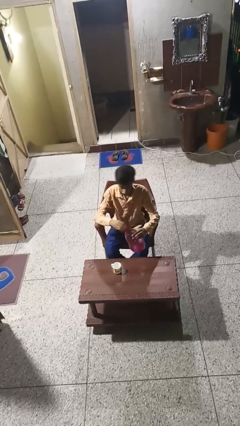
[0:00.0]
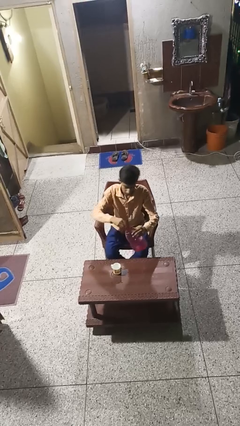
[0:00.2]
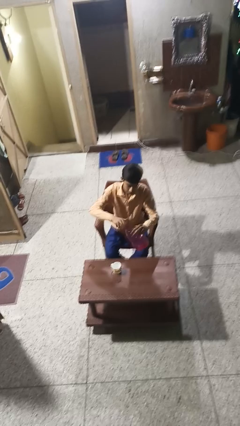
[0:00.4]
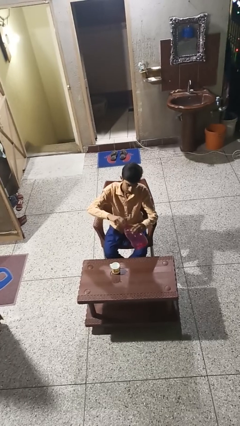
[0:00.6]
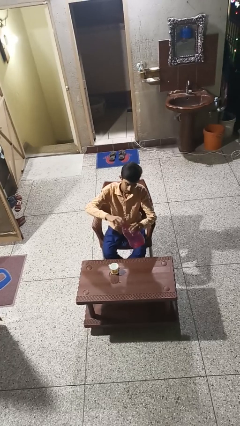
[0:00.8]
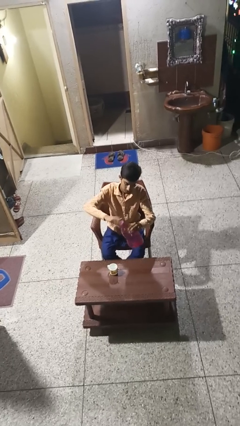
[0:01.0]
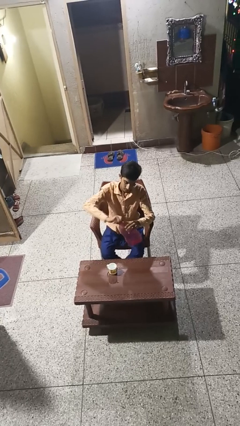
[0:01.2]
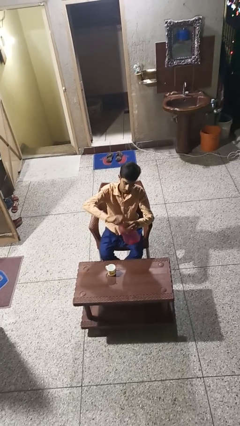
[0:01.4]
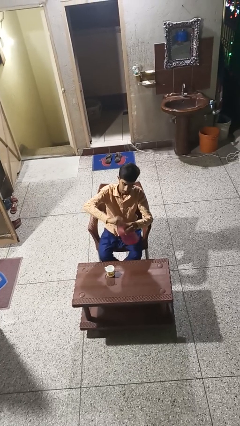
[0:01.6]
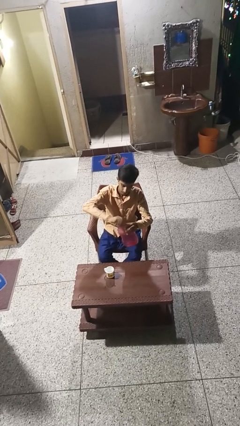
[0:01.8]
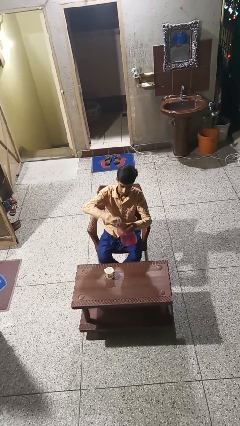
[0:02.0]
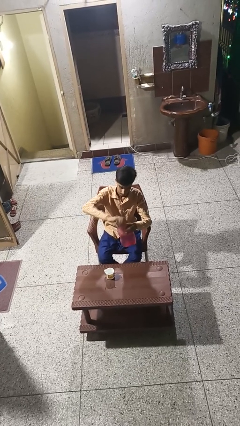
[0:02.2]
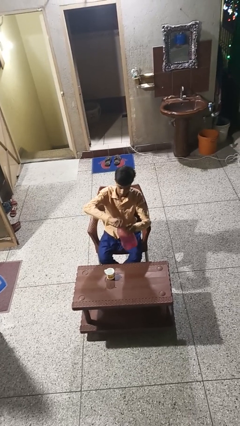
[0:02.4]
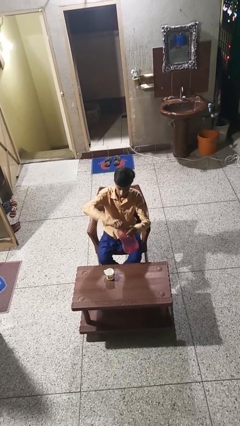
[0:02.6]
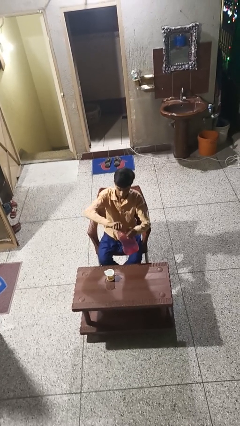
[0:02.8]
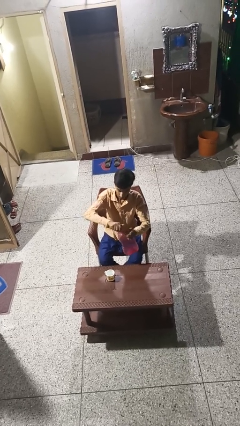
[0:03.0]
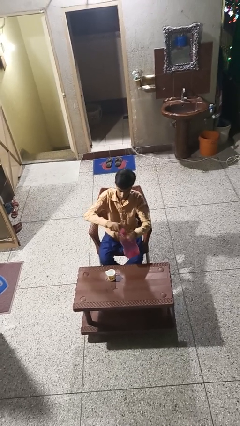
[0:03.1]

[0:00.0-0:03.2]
person screws lid to bottle

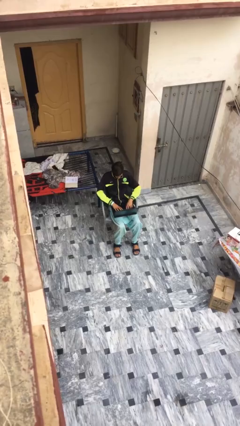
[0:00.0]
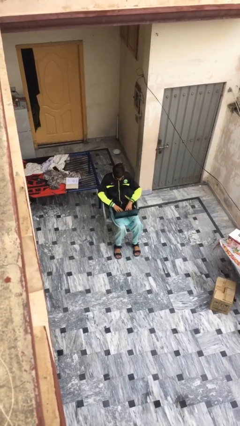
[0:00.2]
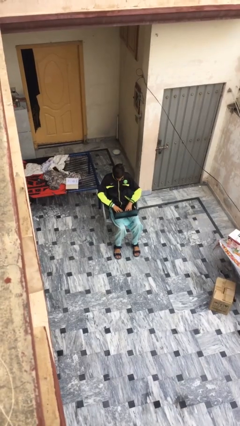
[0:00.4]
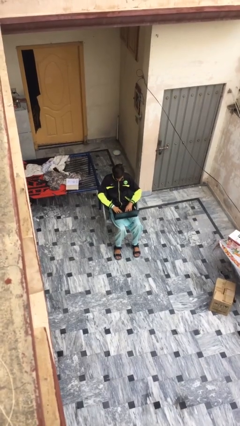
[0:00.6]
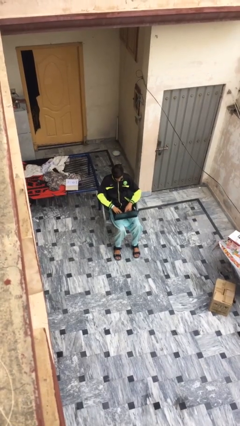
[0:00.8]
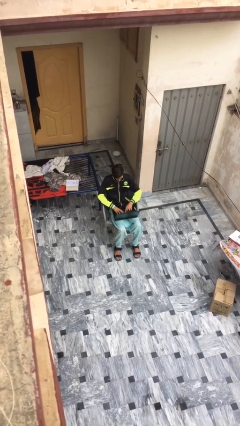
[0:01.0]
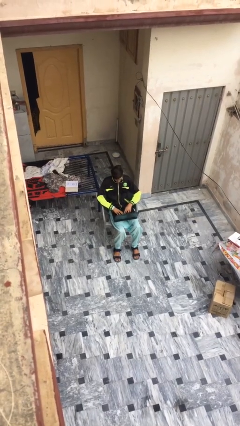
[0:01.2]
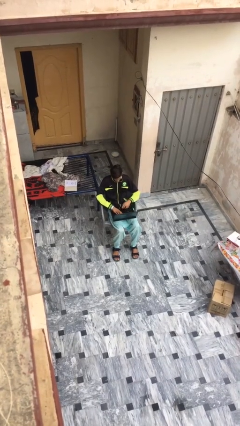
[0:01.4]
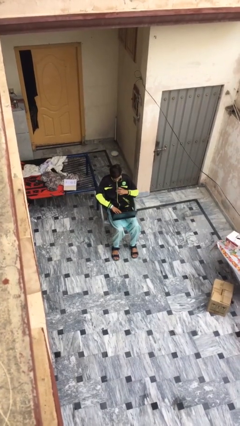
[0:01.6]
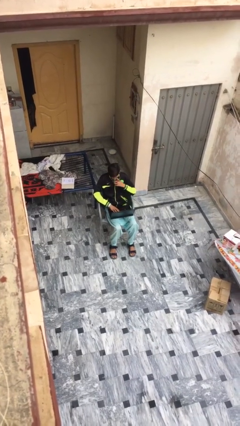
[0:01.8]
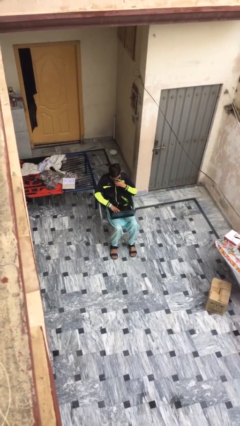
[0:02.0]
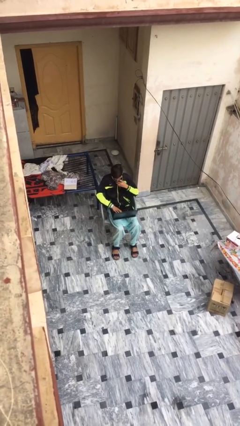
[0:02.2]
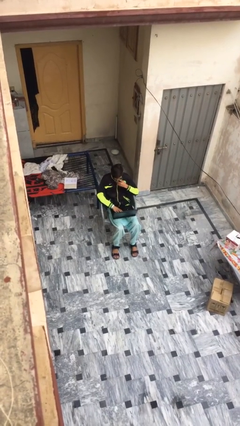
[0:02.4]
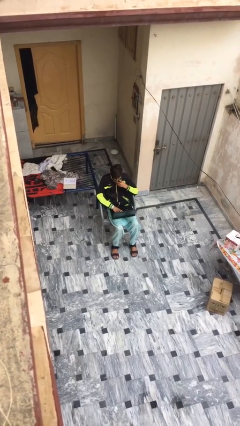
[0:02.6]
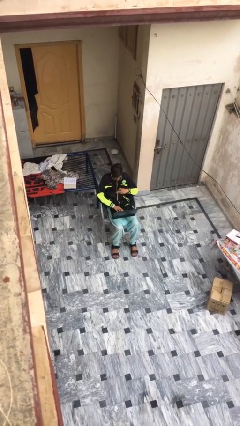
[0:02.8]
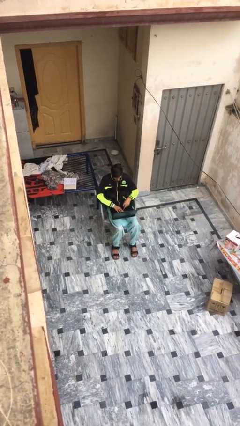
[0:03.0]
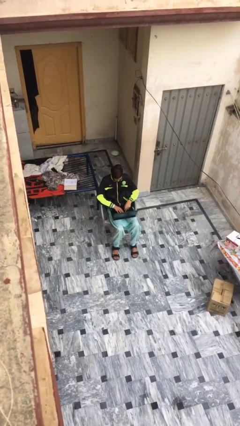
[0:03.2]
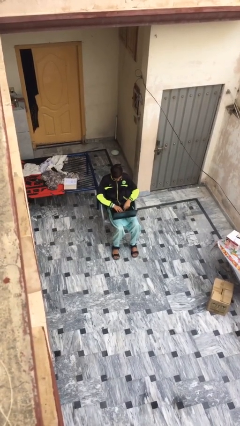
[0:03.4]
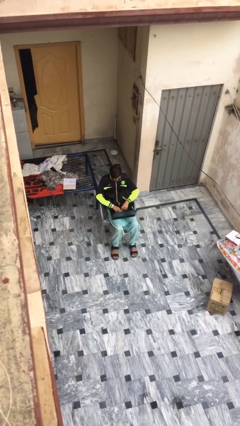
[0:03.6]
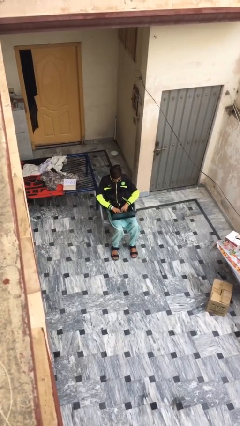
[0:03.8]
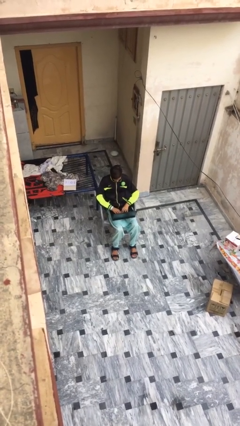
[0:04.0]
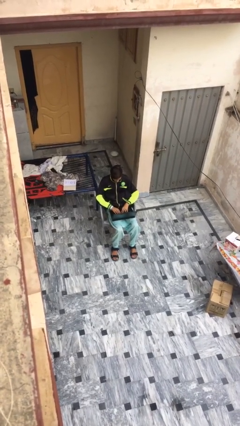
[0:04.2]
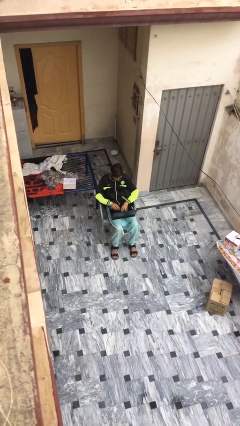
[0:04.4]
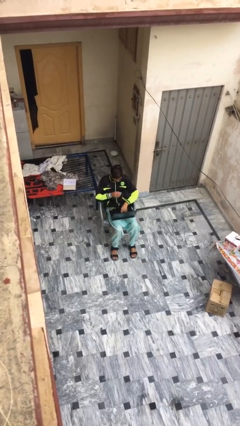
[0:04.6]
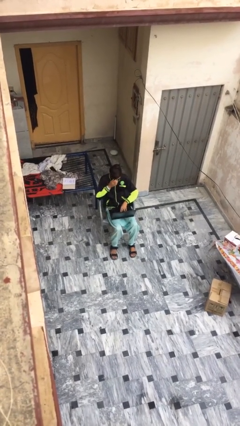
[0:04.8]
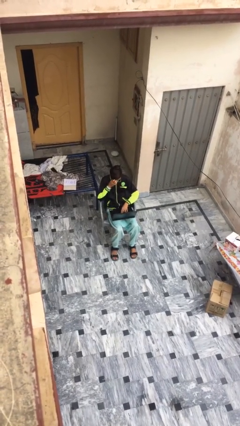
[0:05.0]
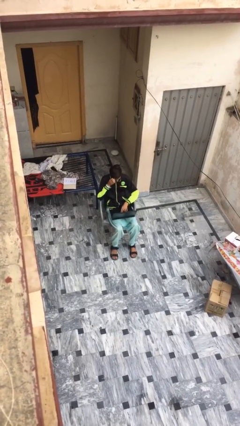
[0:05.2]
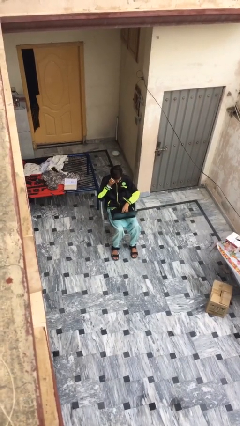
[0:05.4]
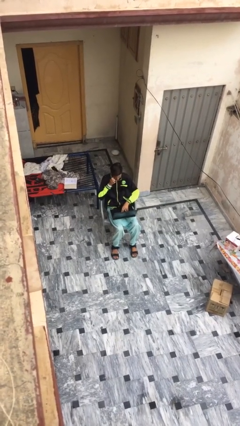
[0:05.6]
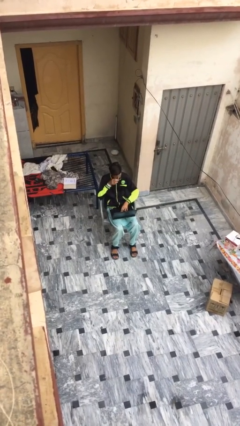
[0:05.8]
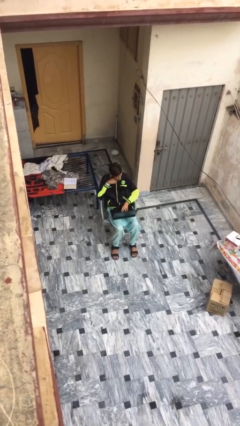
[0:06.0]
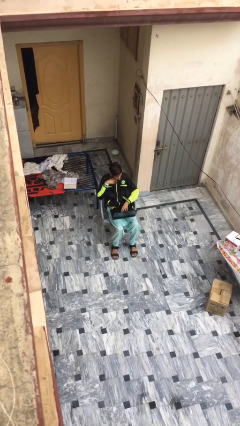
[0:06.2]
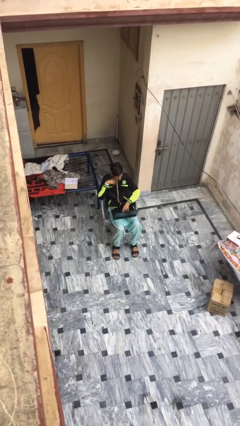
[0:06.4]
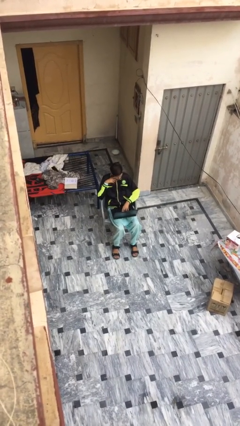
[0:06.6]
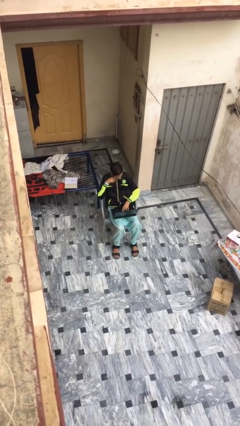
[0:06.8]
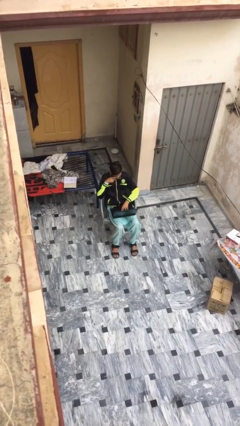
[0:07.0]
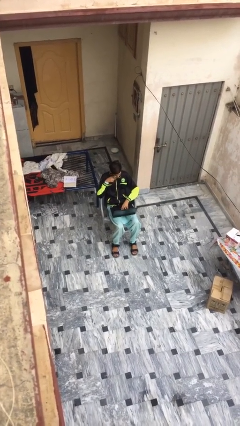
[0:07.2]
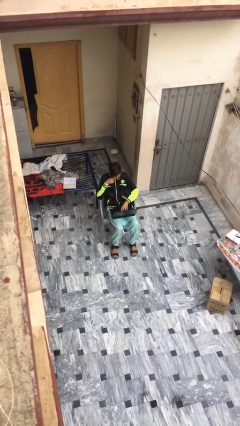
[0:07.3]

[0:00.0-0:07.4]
person interacts with laptop

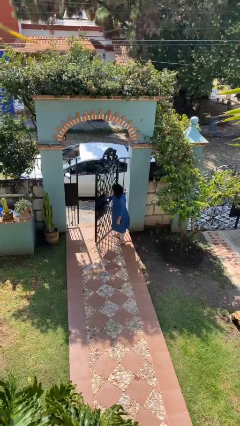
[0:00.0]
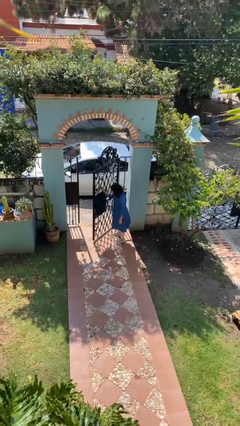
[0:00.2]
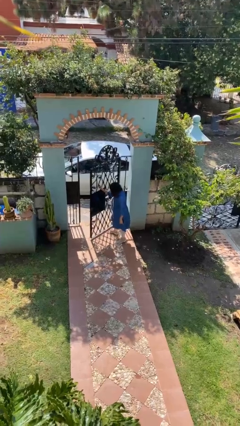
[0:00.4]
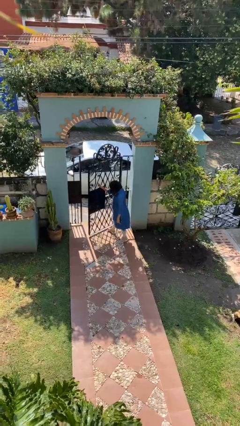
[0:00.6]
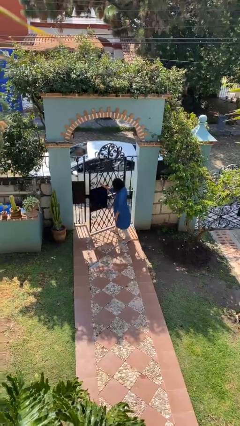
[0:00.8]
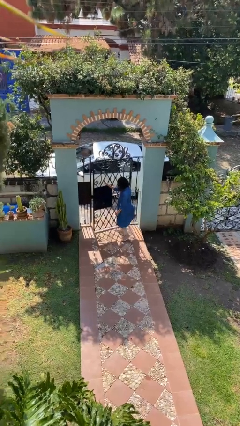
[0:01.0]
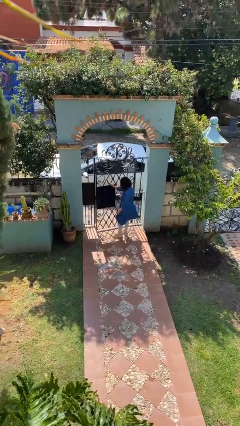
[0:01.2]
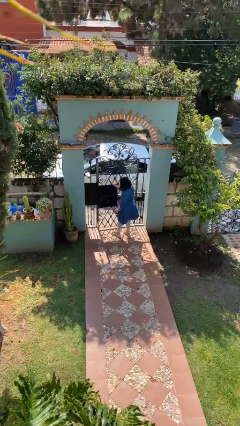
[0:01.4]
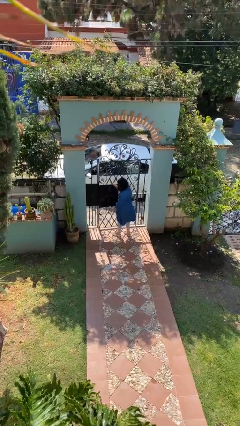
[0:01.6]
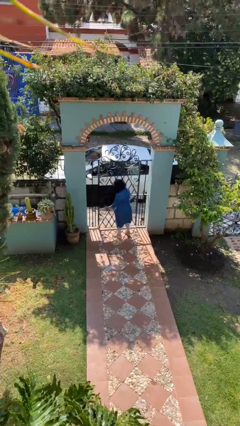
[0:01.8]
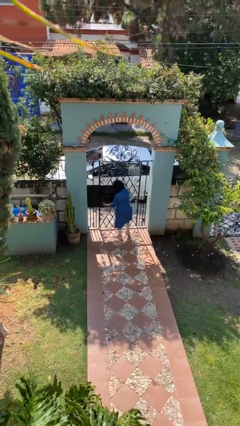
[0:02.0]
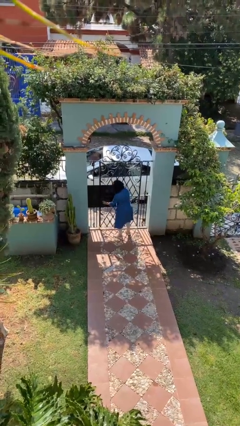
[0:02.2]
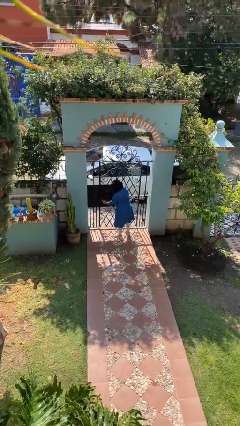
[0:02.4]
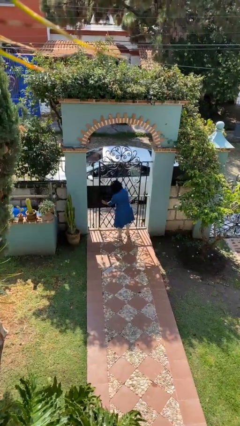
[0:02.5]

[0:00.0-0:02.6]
person closes facility door

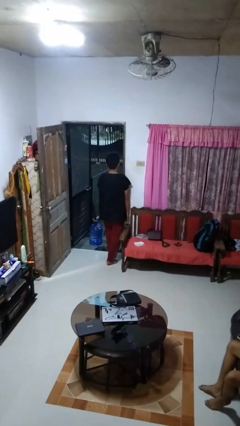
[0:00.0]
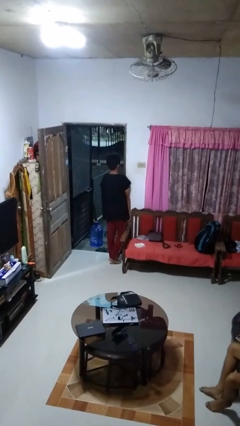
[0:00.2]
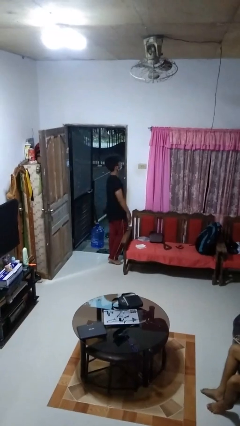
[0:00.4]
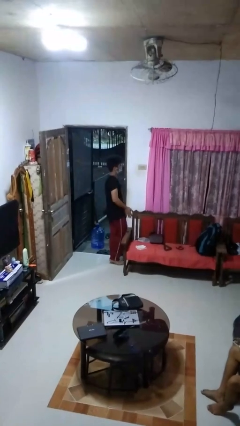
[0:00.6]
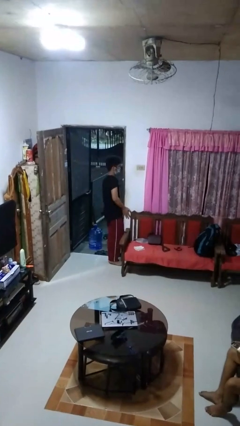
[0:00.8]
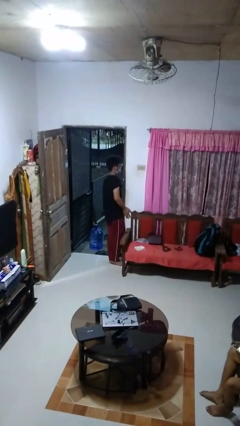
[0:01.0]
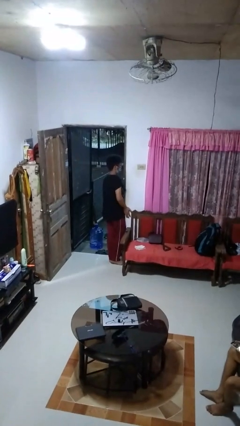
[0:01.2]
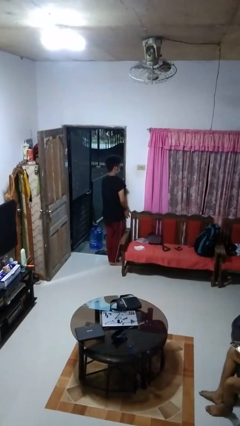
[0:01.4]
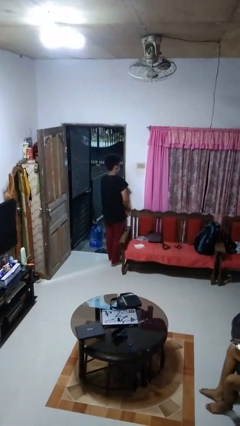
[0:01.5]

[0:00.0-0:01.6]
person bumps into wall

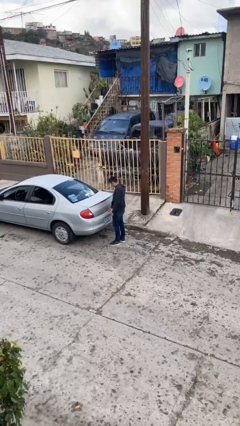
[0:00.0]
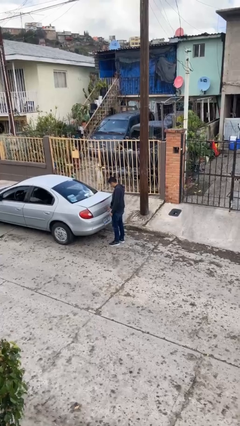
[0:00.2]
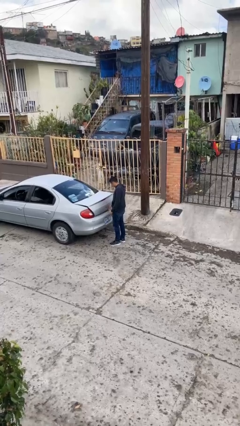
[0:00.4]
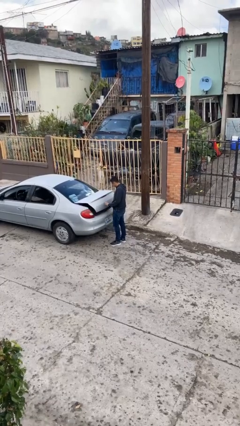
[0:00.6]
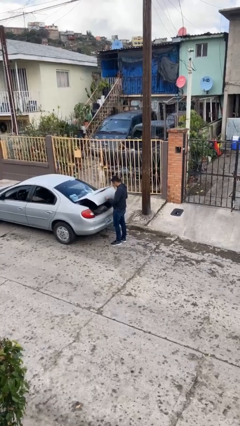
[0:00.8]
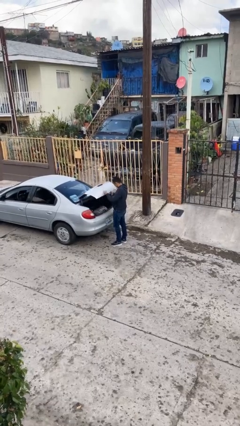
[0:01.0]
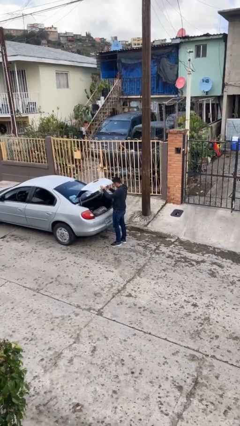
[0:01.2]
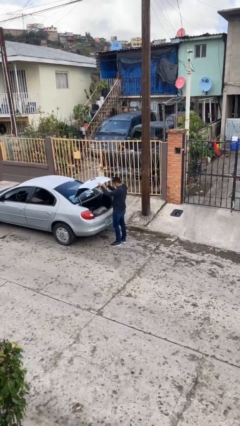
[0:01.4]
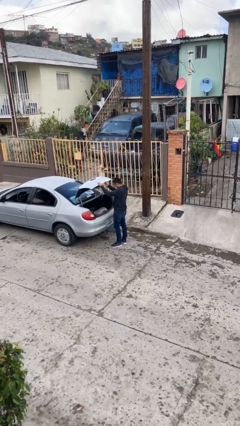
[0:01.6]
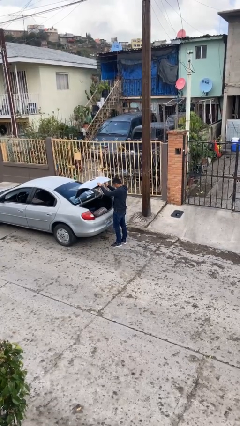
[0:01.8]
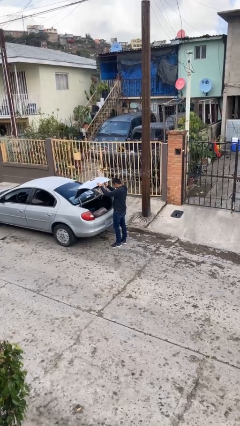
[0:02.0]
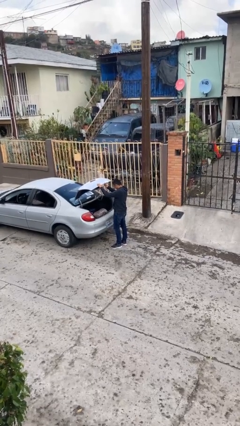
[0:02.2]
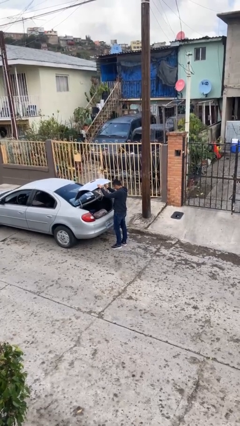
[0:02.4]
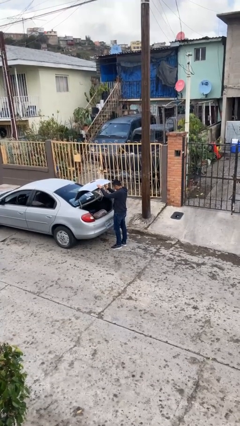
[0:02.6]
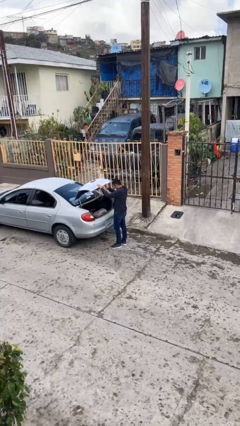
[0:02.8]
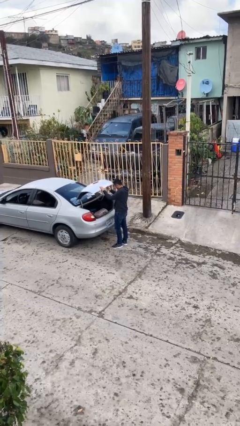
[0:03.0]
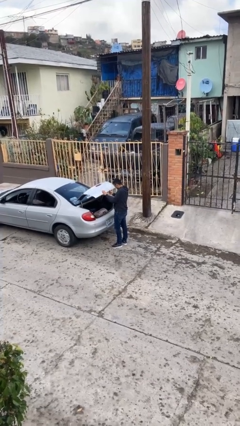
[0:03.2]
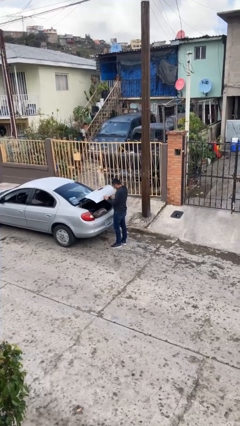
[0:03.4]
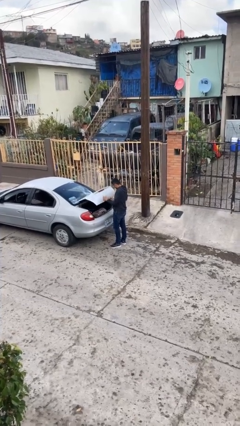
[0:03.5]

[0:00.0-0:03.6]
person opens car trunk
